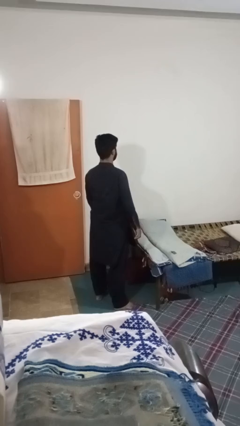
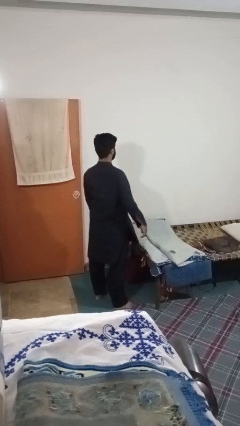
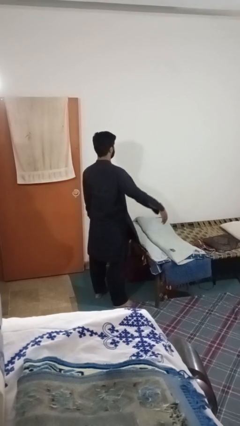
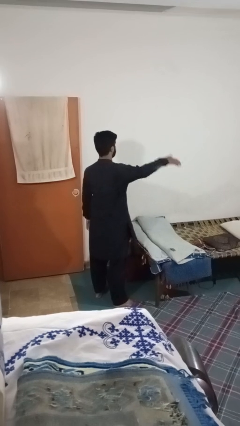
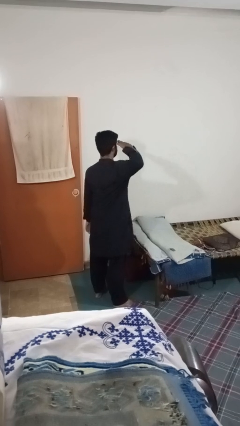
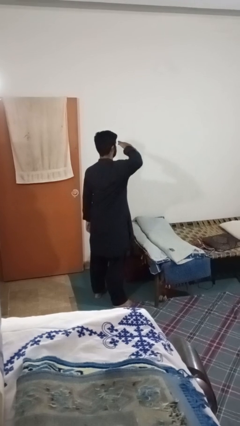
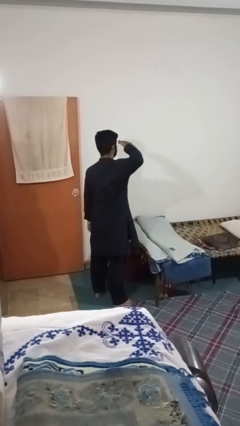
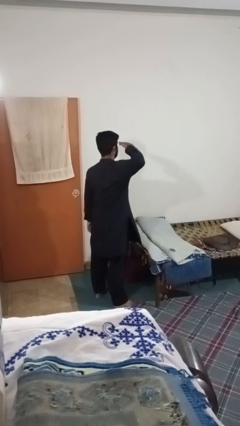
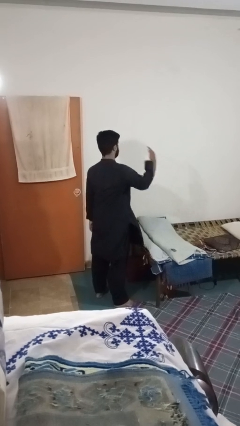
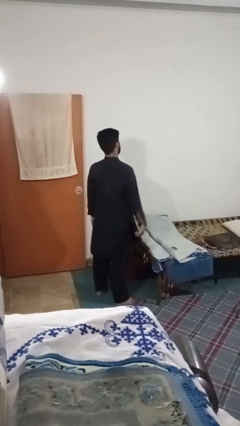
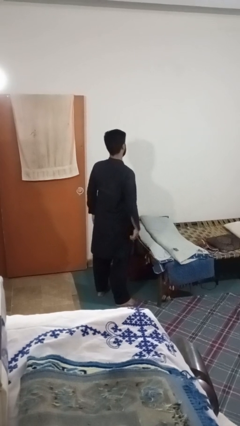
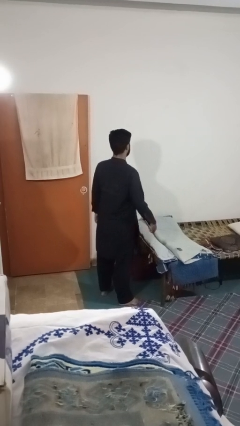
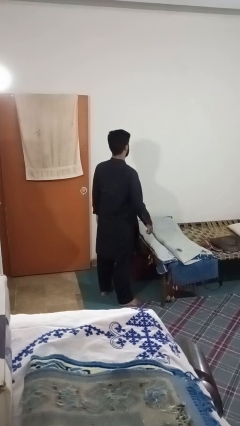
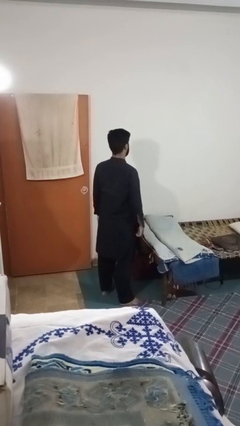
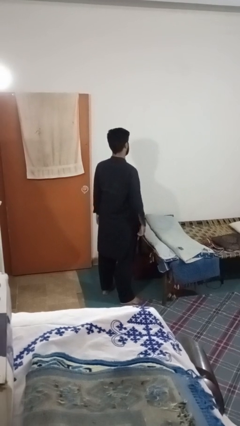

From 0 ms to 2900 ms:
person salutes

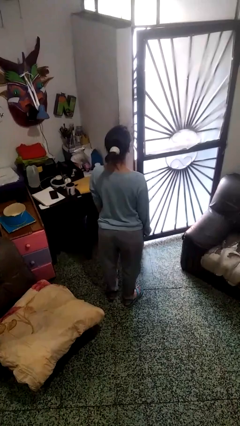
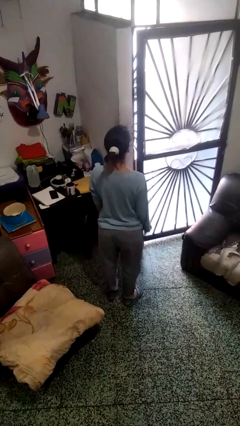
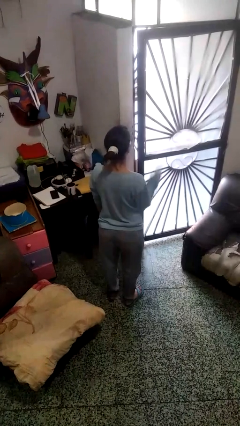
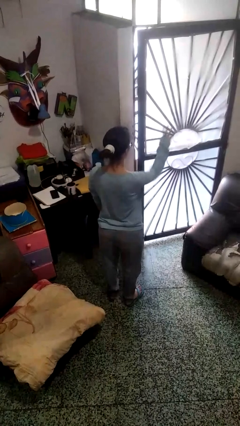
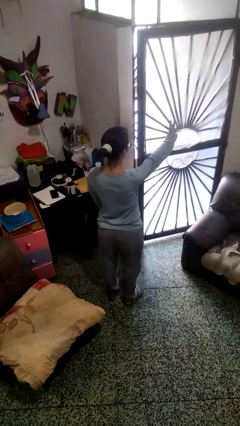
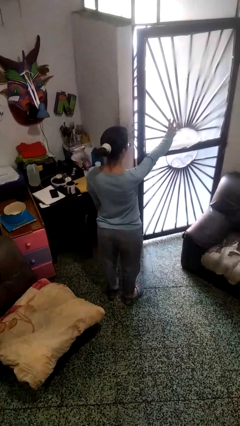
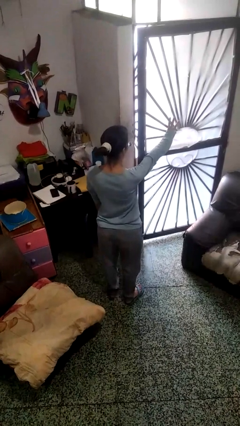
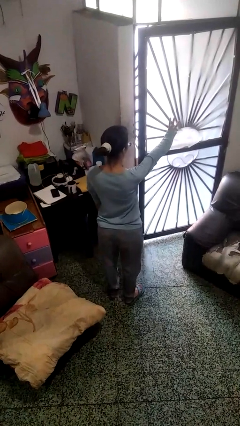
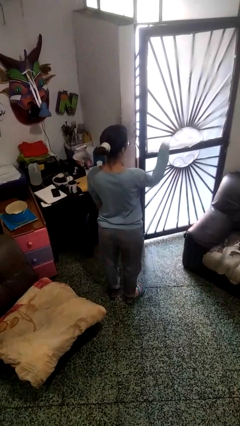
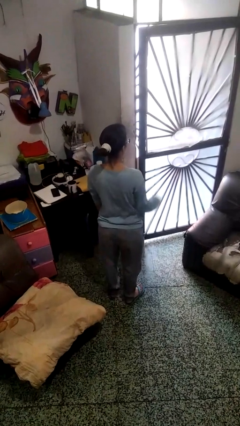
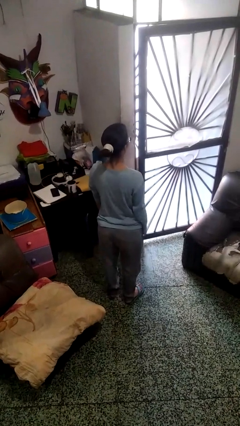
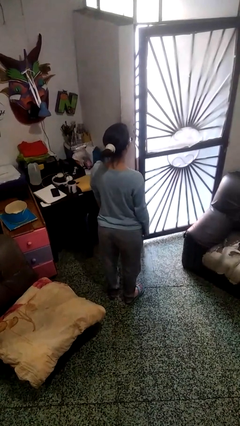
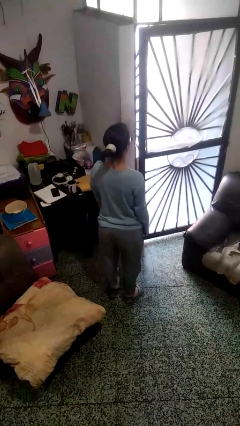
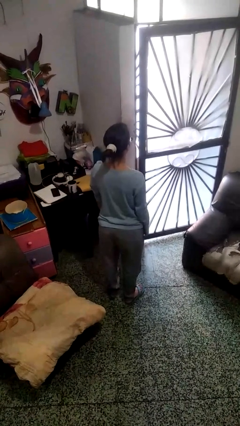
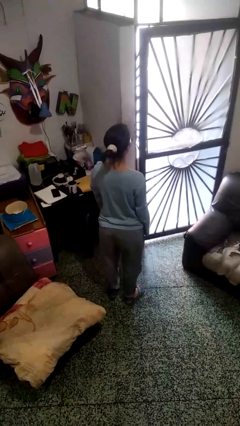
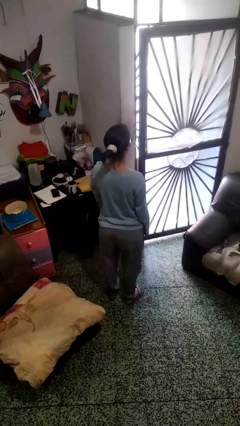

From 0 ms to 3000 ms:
person gestures number three

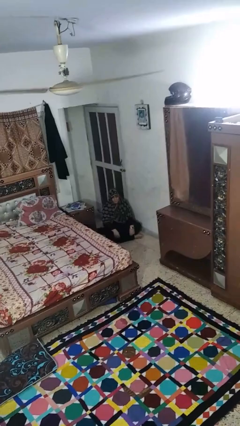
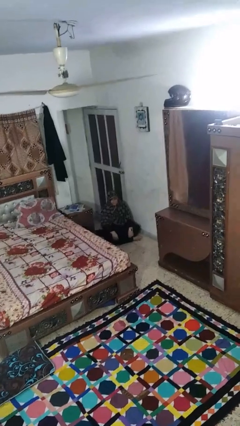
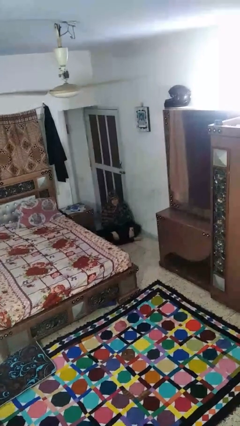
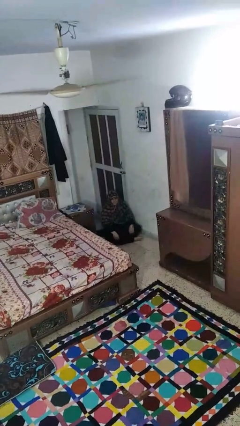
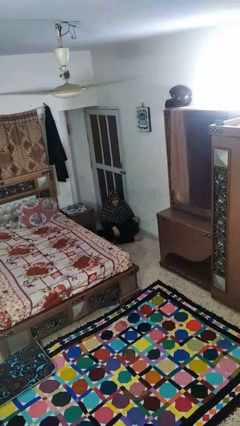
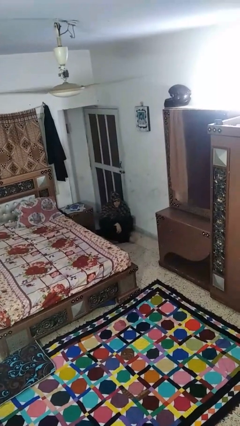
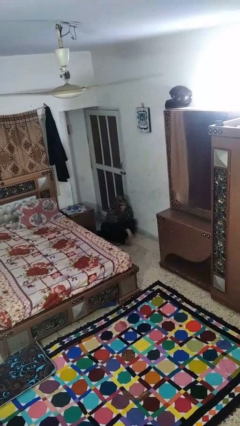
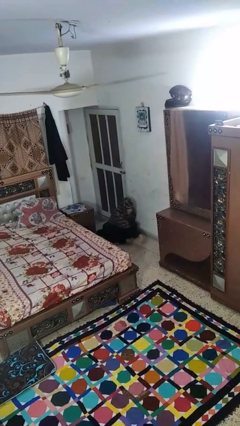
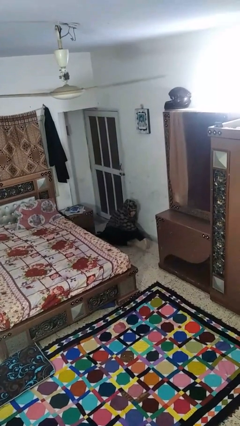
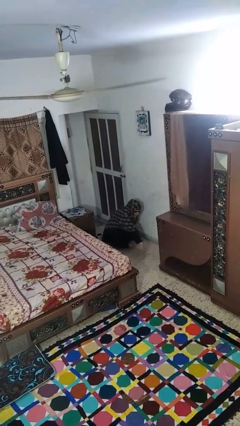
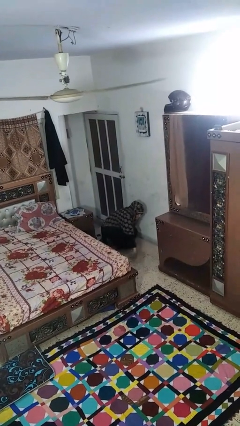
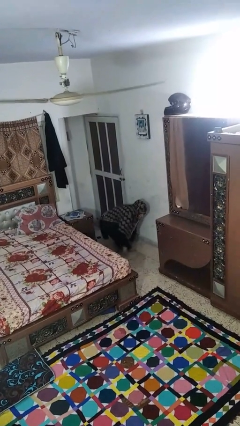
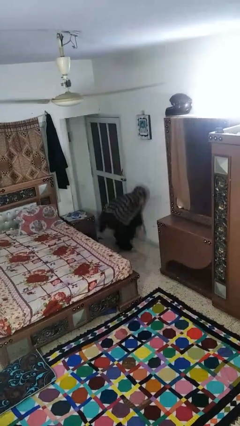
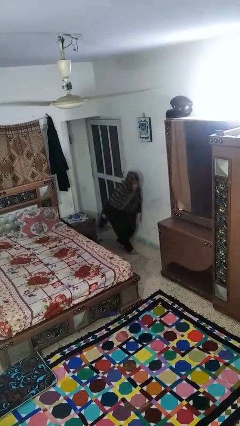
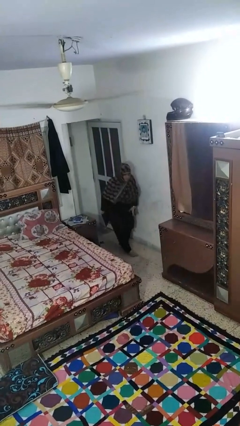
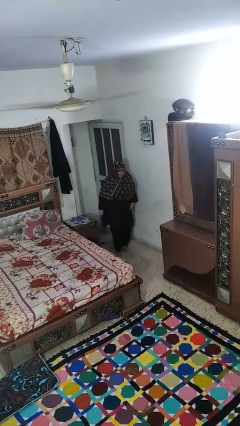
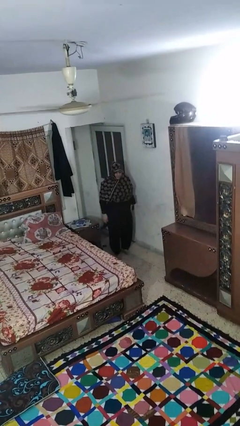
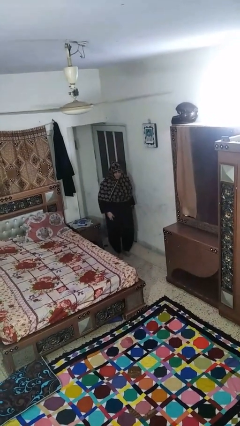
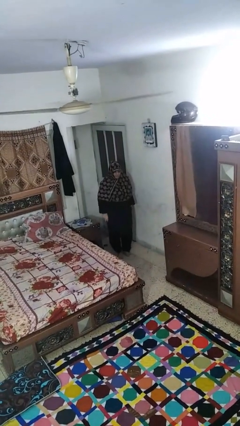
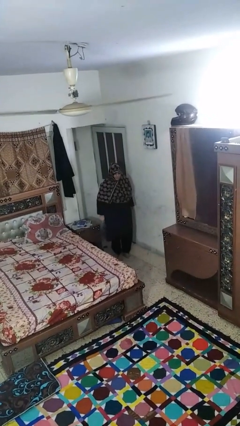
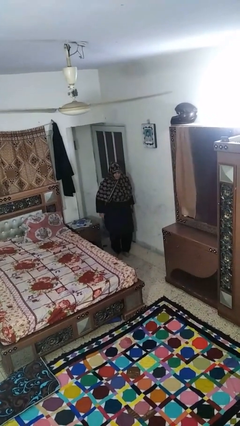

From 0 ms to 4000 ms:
person stands up from floor

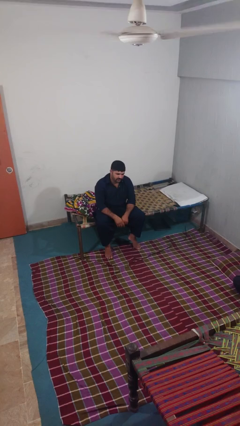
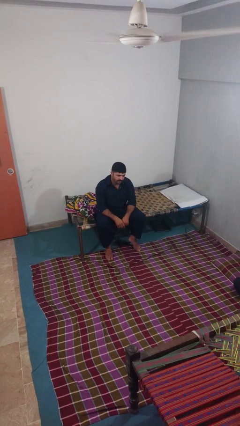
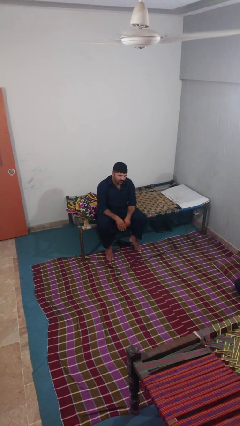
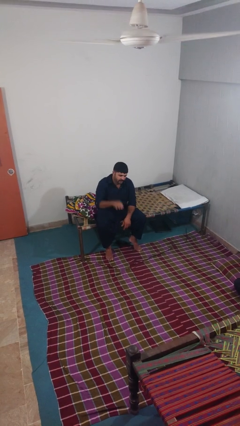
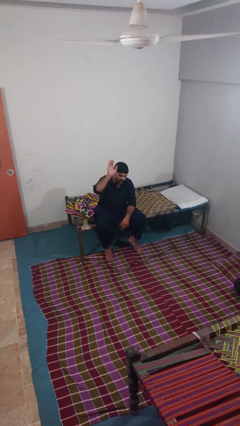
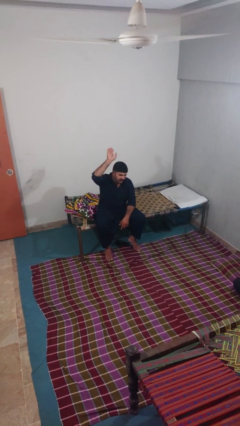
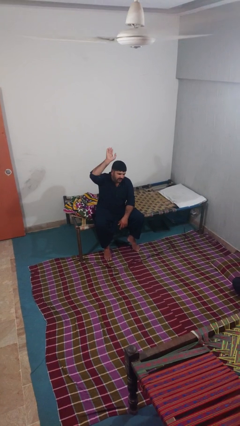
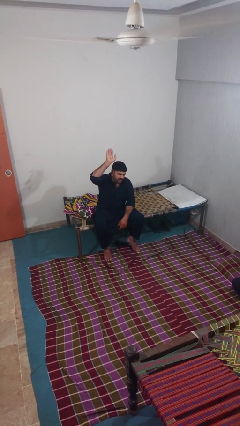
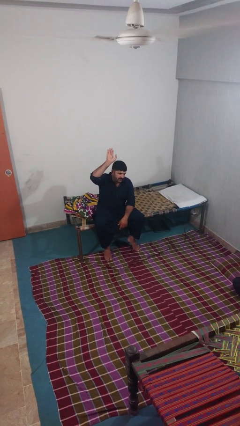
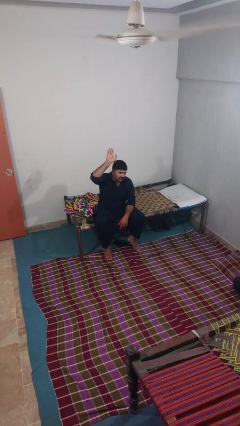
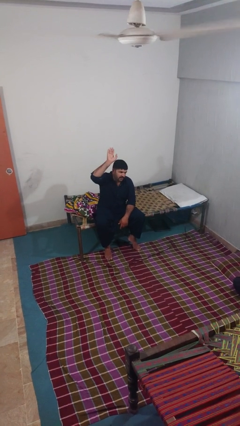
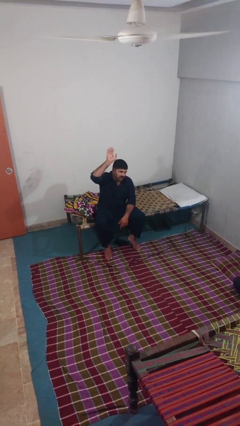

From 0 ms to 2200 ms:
person gestures swipe up

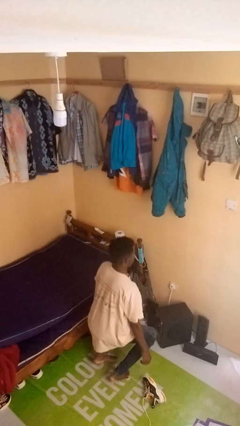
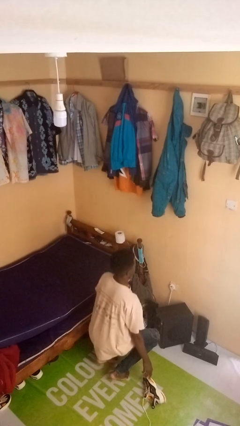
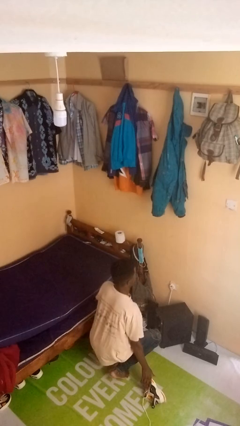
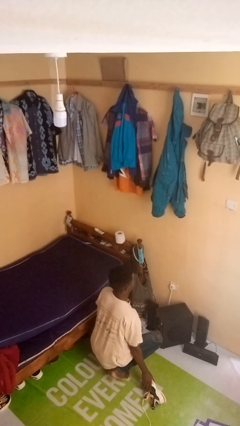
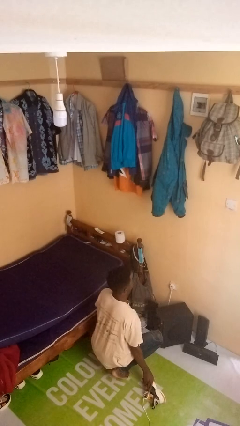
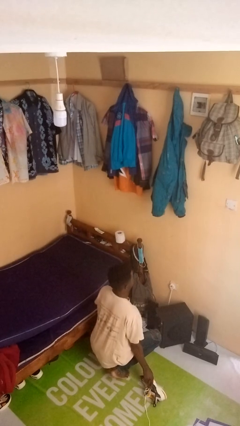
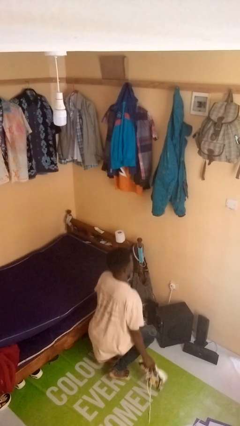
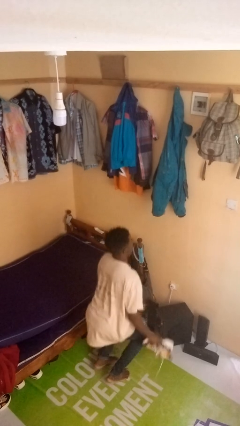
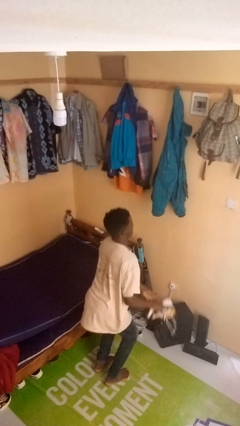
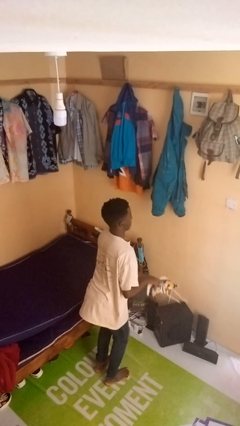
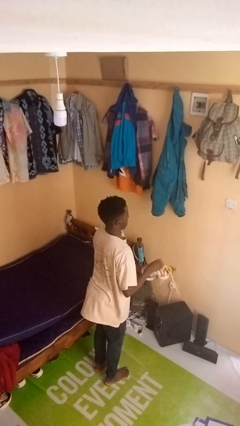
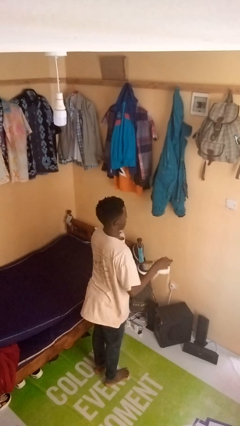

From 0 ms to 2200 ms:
person picks up object from floor

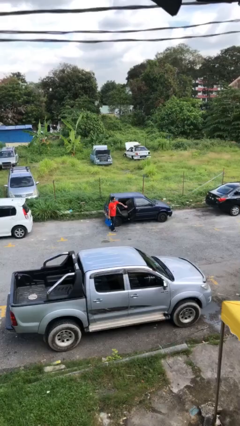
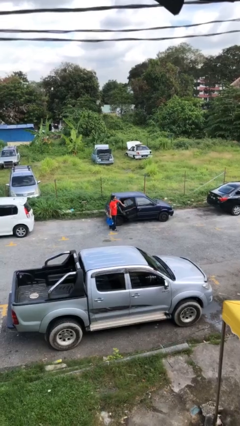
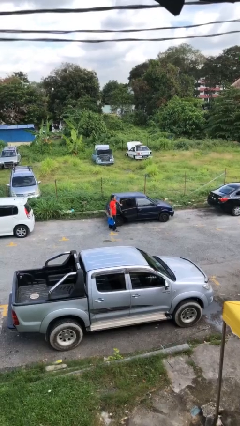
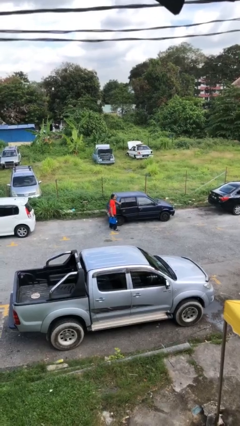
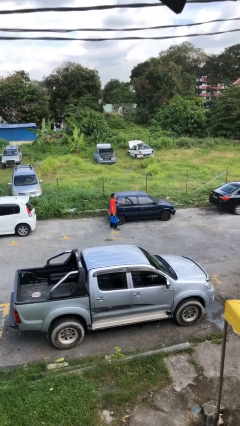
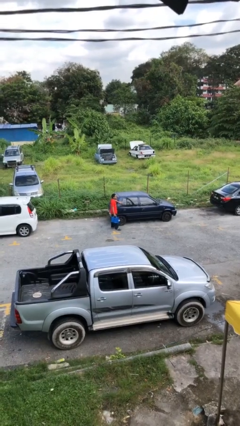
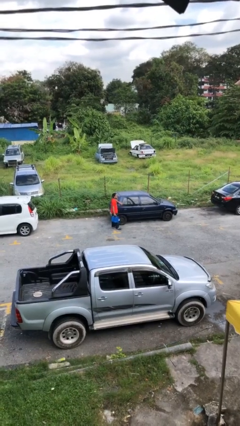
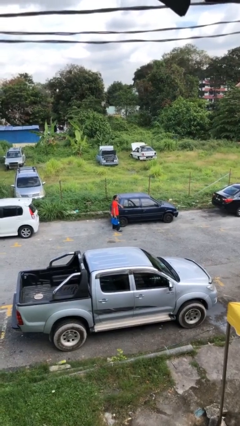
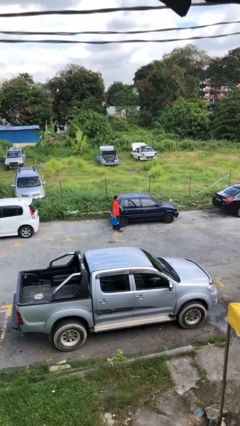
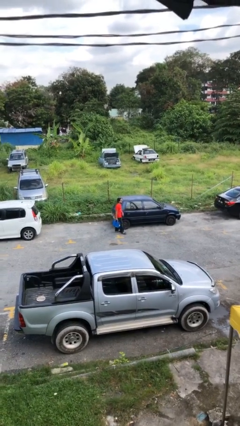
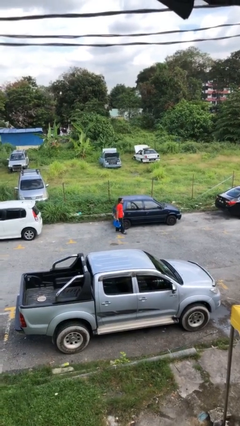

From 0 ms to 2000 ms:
person closes car door

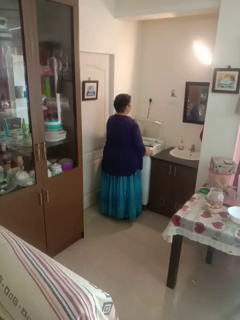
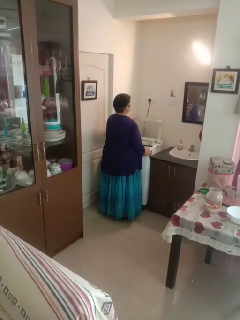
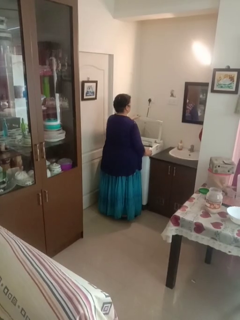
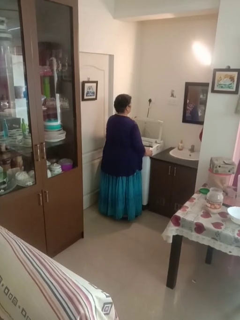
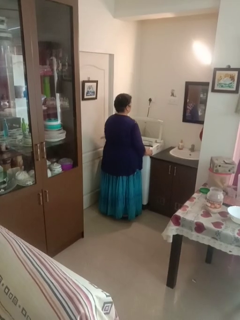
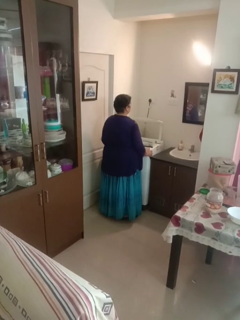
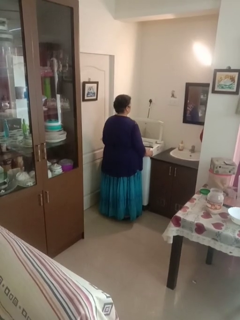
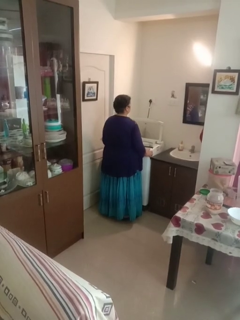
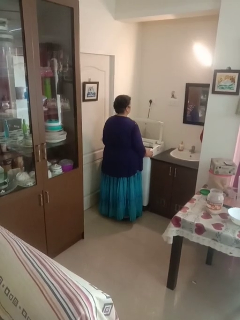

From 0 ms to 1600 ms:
person opens clothes washer
